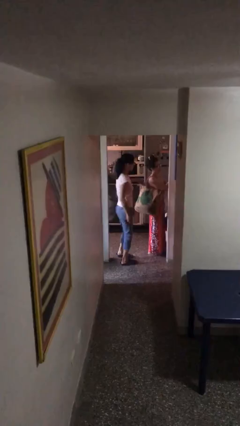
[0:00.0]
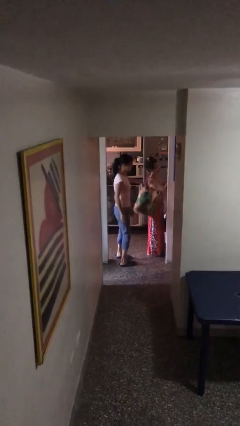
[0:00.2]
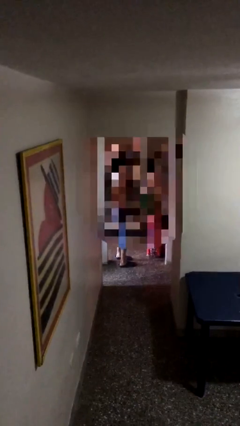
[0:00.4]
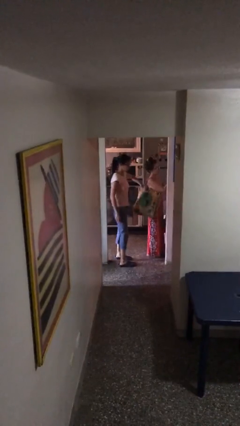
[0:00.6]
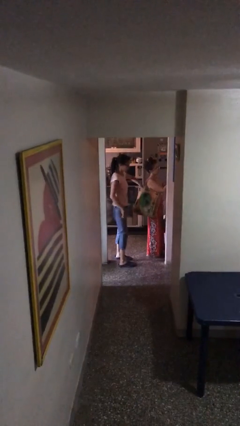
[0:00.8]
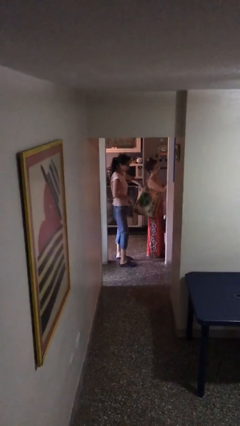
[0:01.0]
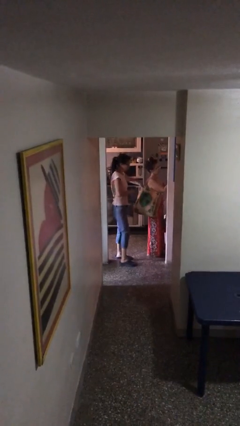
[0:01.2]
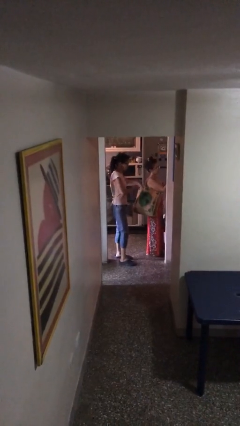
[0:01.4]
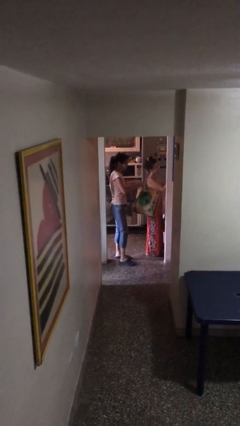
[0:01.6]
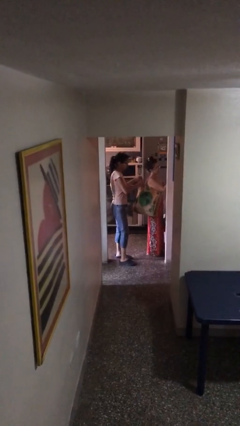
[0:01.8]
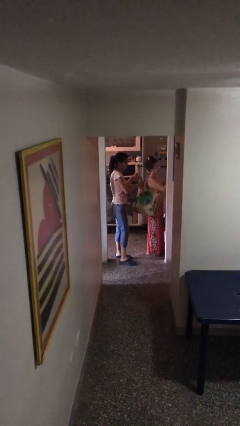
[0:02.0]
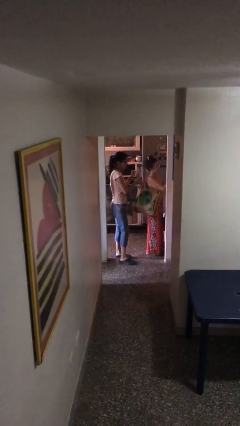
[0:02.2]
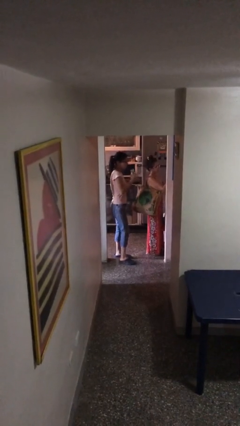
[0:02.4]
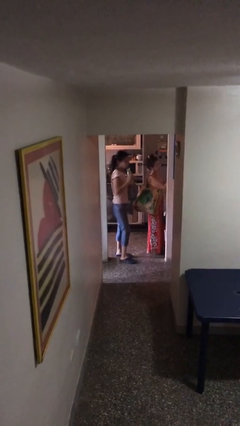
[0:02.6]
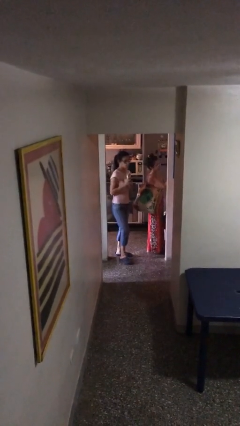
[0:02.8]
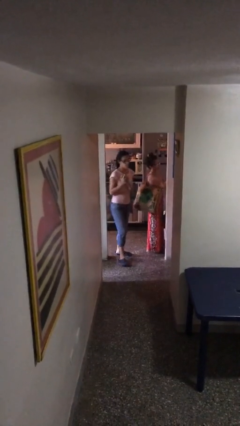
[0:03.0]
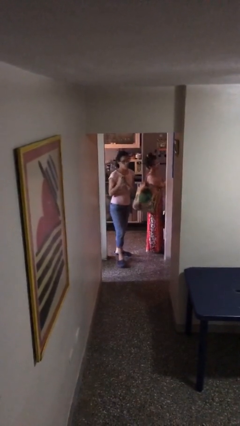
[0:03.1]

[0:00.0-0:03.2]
person steals object from person

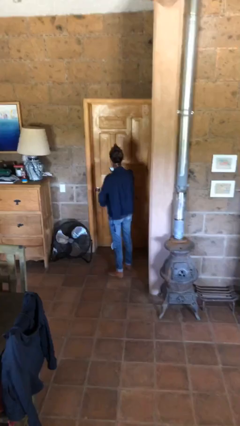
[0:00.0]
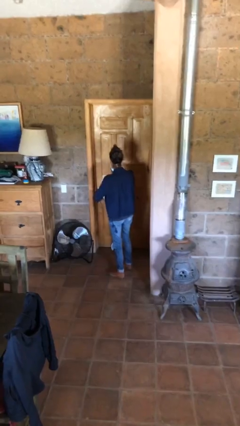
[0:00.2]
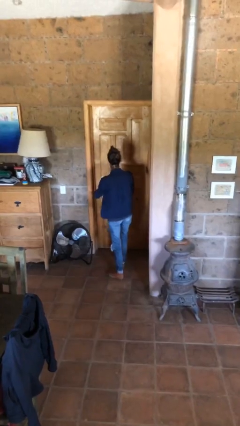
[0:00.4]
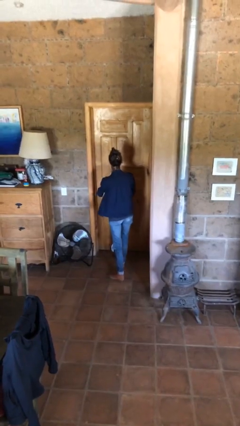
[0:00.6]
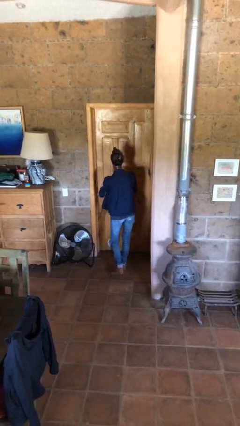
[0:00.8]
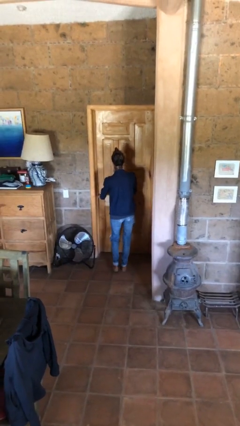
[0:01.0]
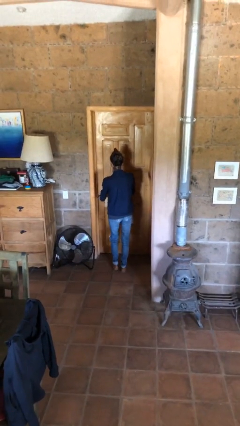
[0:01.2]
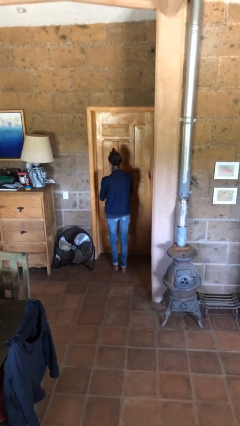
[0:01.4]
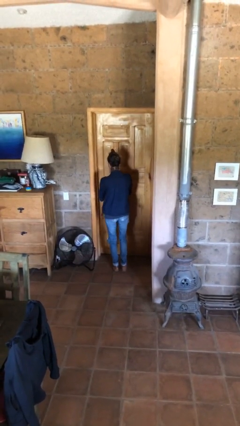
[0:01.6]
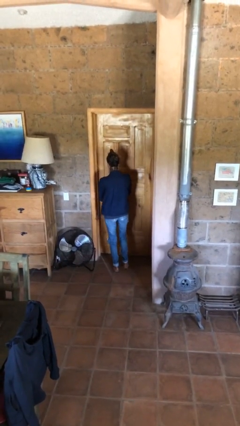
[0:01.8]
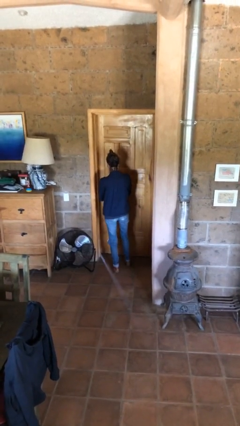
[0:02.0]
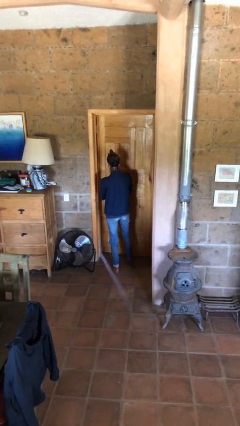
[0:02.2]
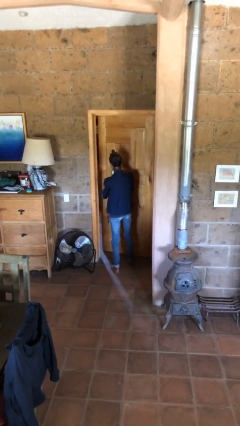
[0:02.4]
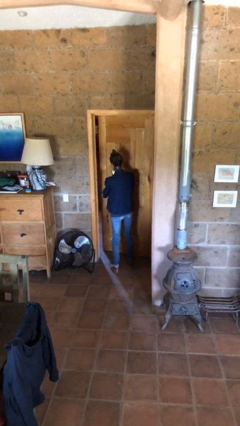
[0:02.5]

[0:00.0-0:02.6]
person opens facility door

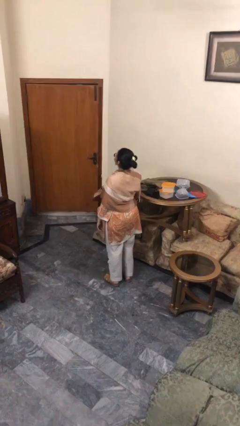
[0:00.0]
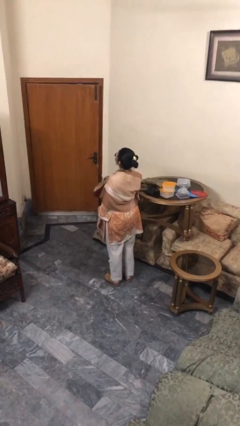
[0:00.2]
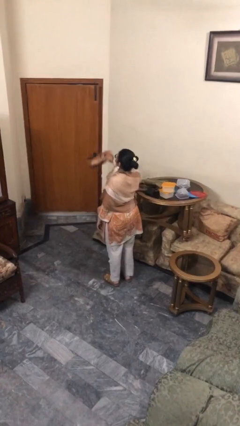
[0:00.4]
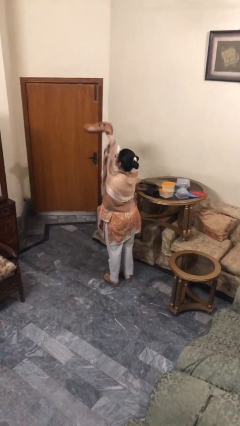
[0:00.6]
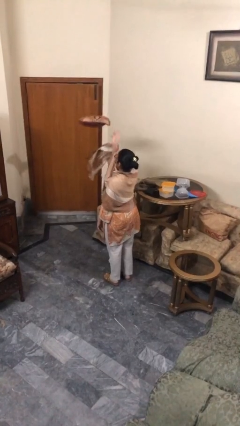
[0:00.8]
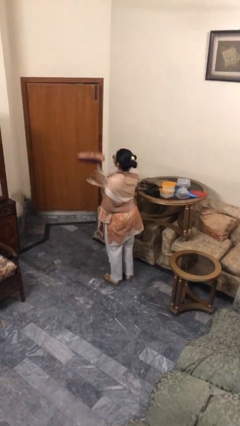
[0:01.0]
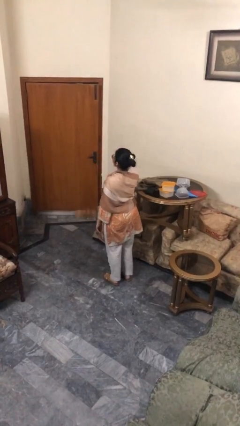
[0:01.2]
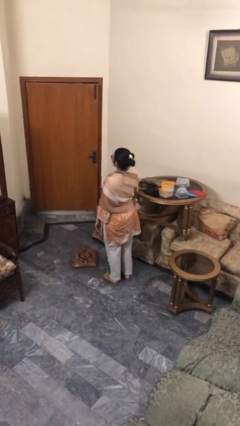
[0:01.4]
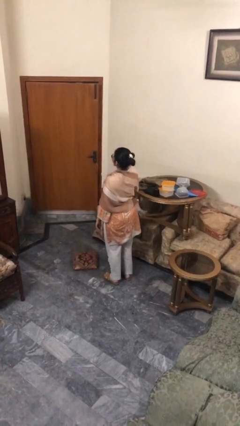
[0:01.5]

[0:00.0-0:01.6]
person drops object

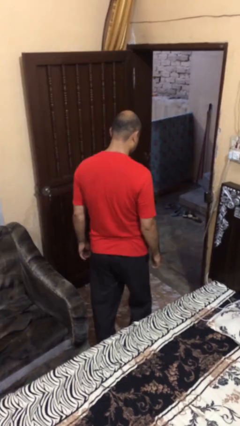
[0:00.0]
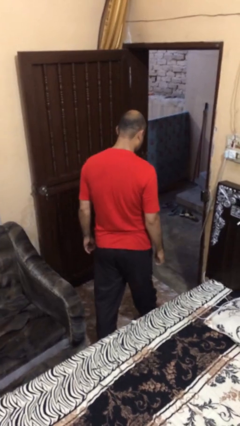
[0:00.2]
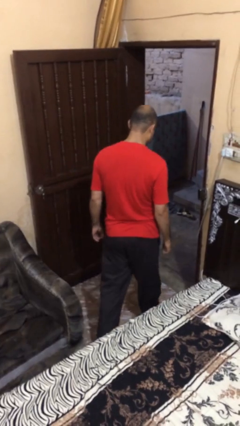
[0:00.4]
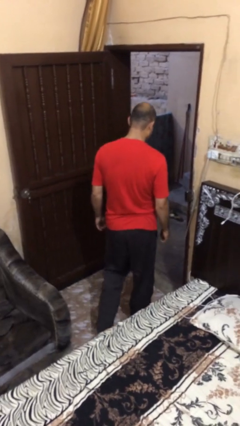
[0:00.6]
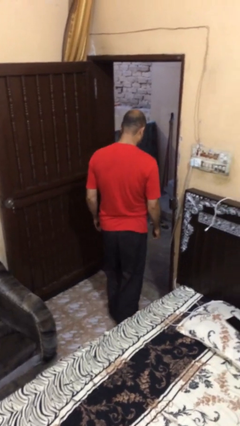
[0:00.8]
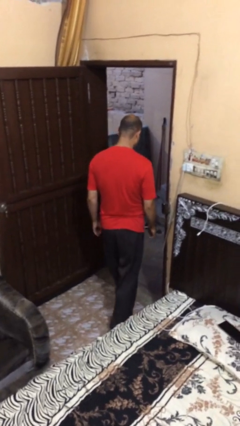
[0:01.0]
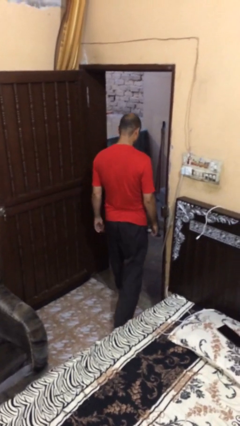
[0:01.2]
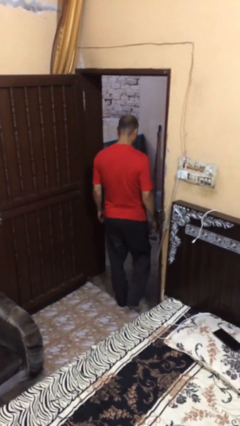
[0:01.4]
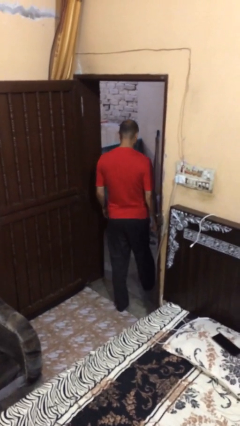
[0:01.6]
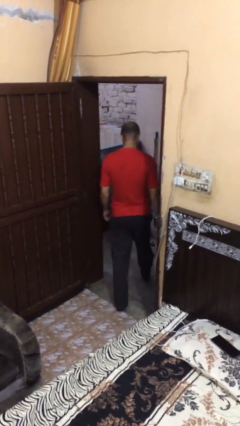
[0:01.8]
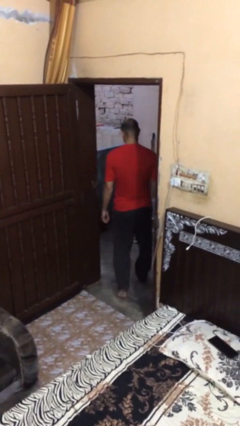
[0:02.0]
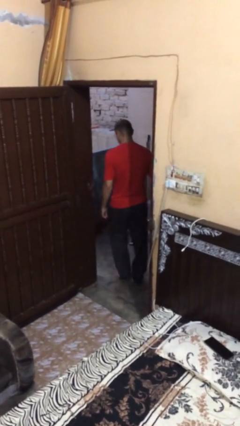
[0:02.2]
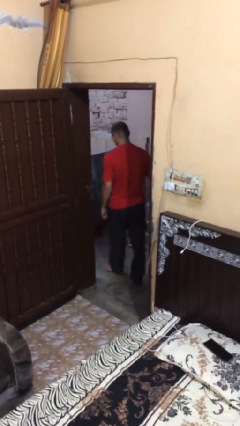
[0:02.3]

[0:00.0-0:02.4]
person exits scene through structure

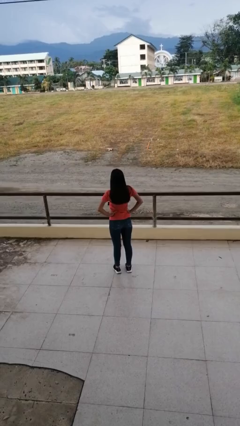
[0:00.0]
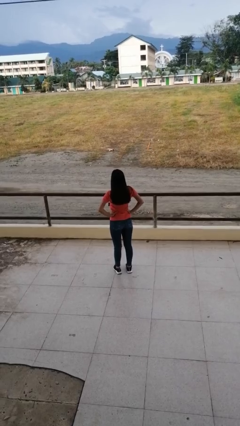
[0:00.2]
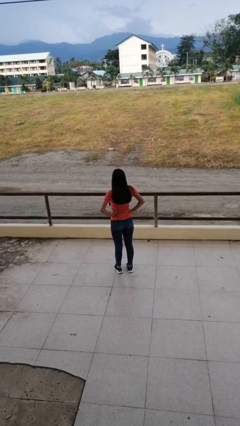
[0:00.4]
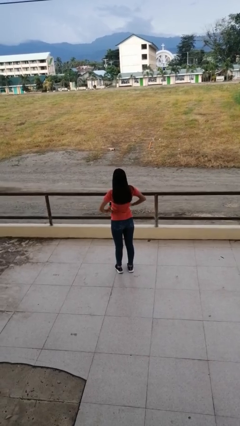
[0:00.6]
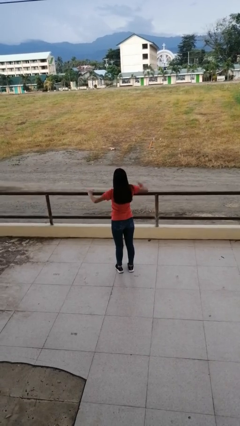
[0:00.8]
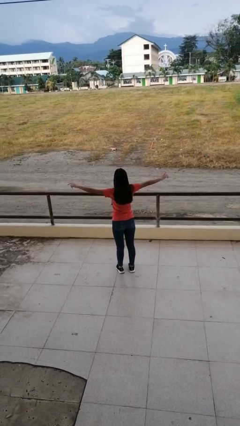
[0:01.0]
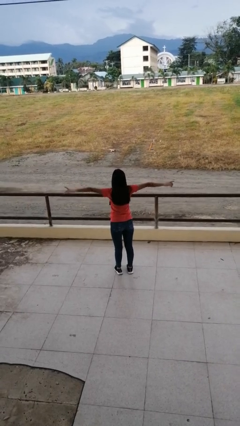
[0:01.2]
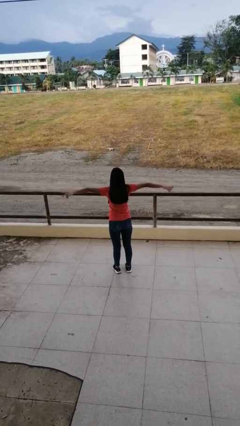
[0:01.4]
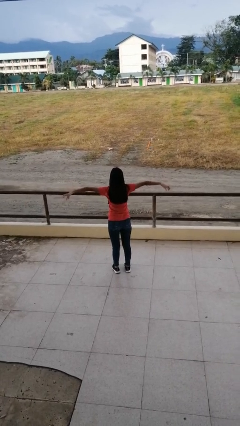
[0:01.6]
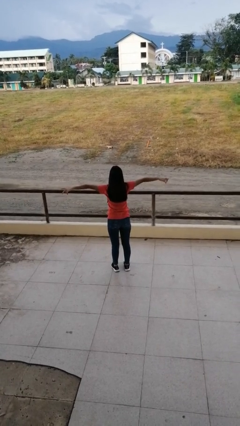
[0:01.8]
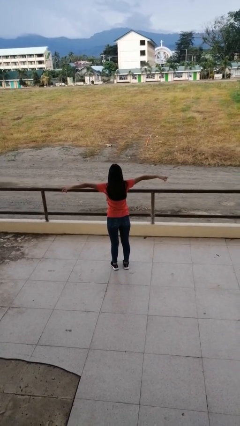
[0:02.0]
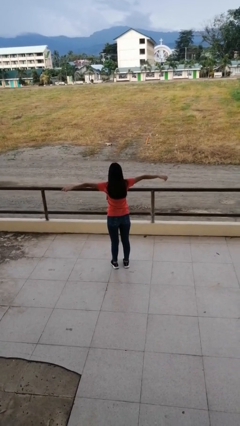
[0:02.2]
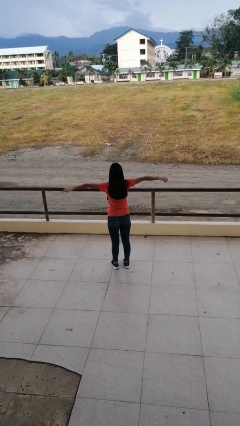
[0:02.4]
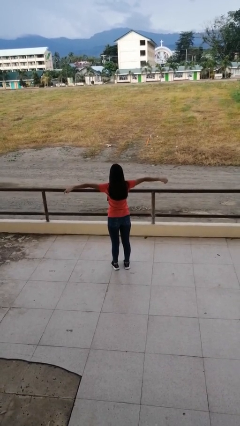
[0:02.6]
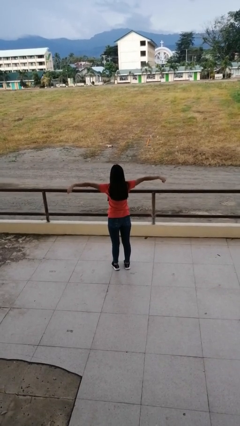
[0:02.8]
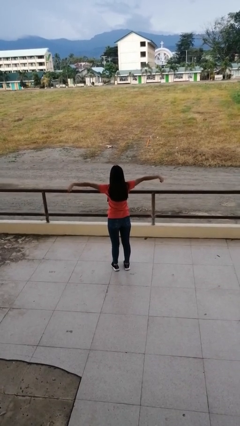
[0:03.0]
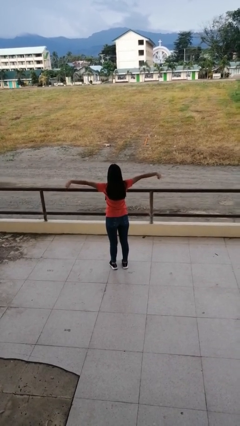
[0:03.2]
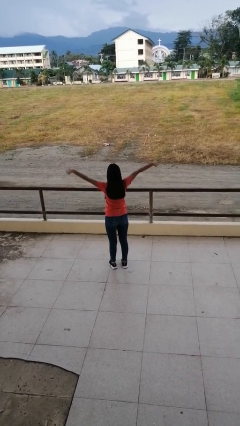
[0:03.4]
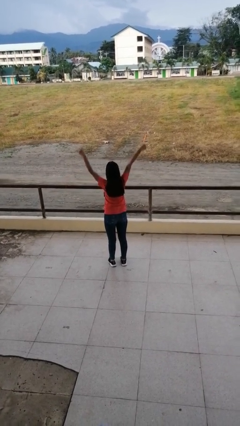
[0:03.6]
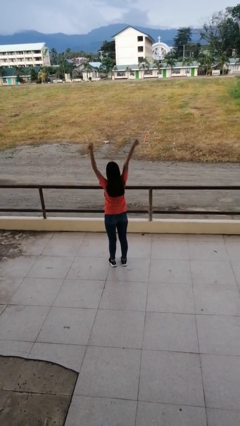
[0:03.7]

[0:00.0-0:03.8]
person stretches arms to side

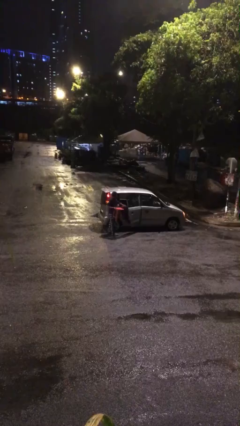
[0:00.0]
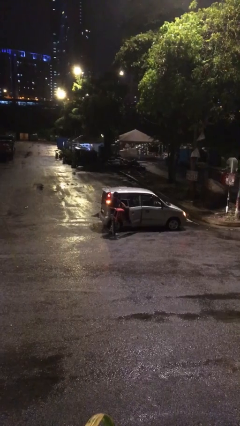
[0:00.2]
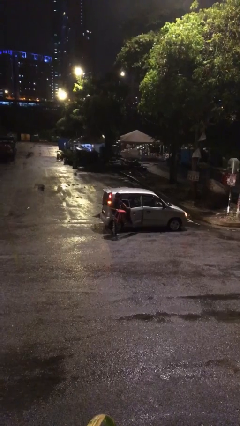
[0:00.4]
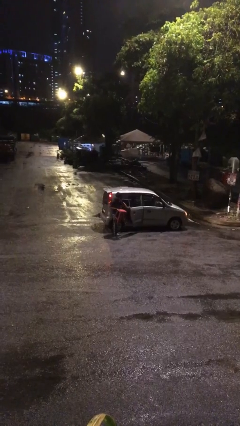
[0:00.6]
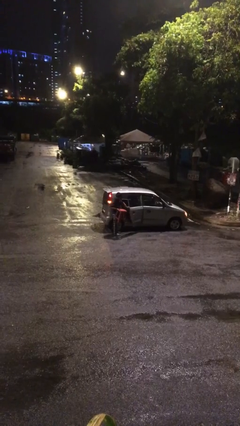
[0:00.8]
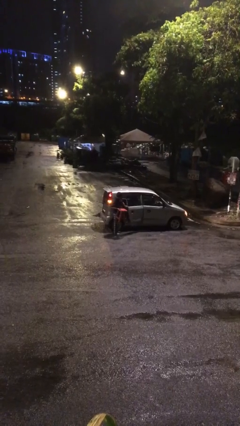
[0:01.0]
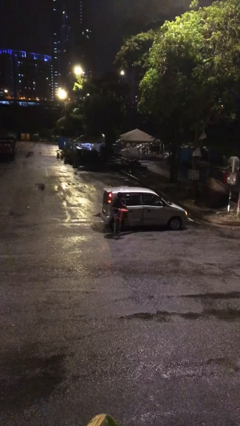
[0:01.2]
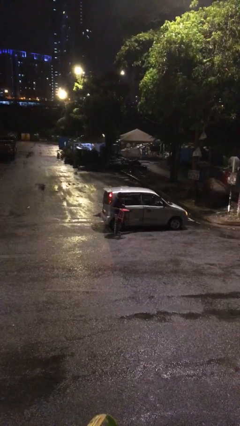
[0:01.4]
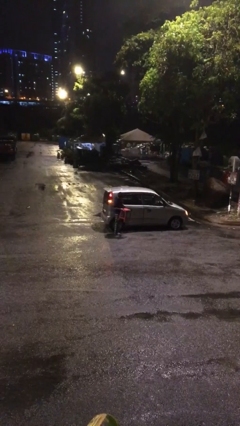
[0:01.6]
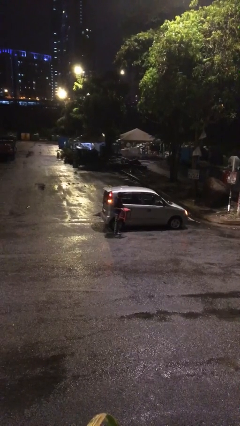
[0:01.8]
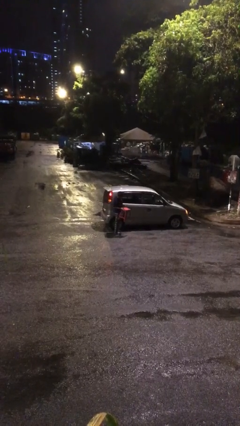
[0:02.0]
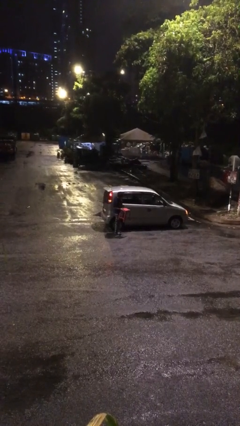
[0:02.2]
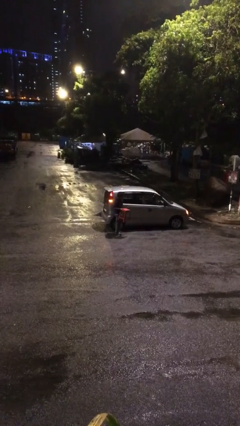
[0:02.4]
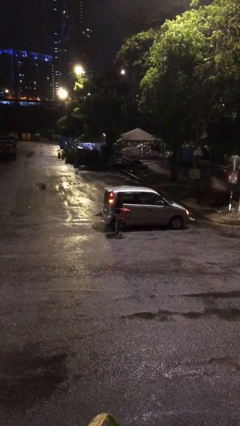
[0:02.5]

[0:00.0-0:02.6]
person closes car door

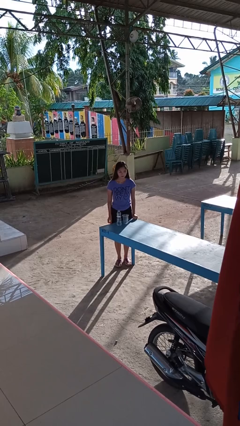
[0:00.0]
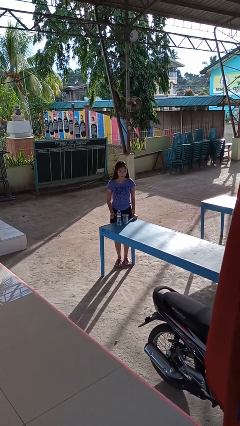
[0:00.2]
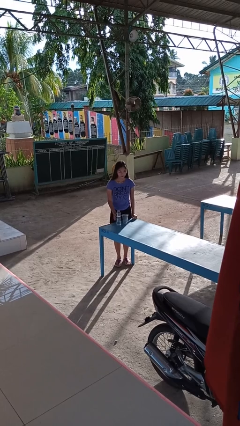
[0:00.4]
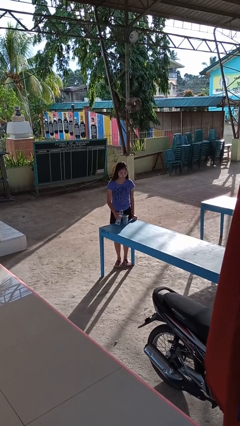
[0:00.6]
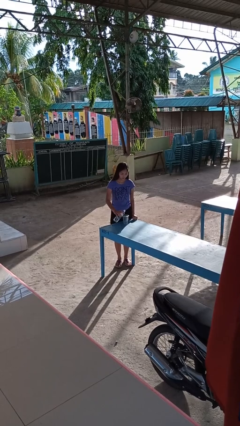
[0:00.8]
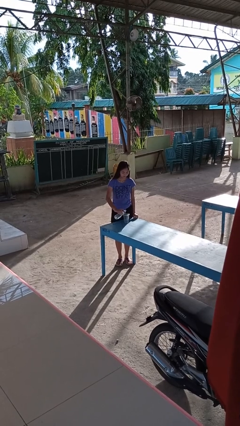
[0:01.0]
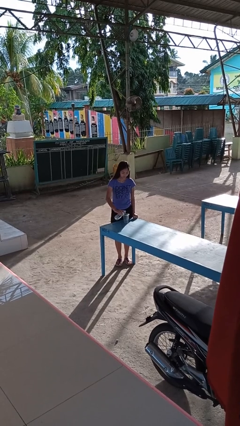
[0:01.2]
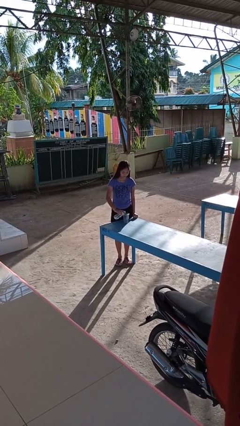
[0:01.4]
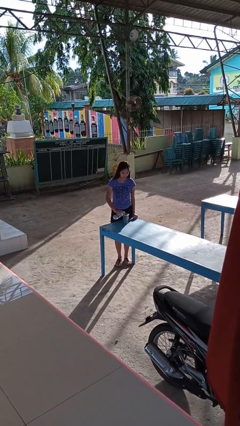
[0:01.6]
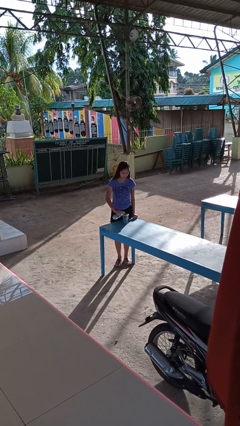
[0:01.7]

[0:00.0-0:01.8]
person pours liquid into cup
